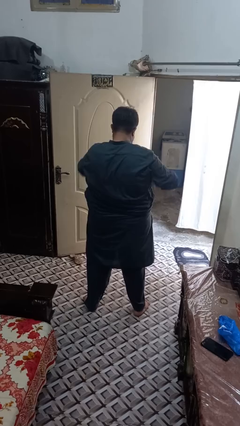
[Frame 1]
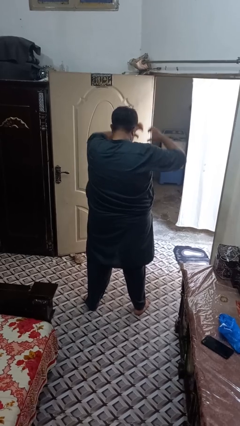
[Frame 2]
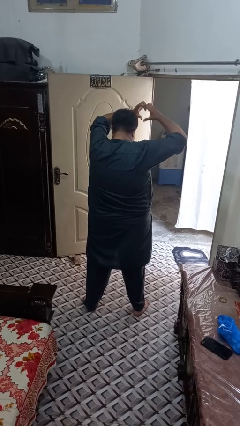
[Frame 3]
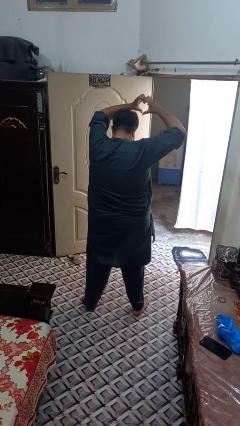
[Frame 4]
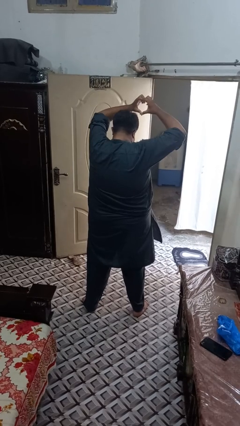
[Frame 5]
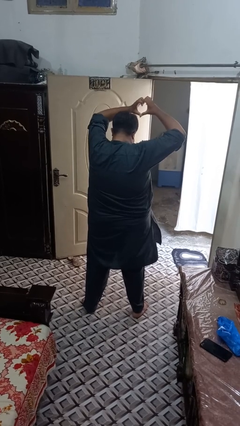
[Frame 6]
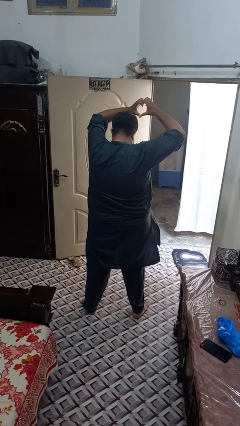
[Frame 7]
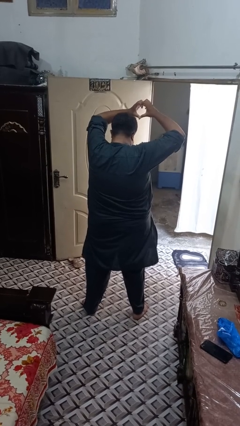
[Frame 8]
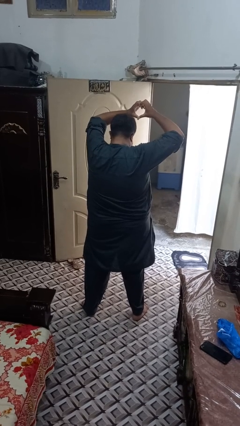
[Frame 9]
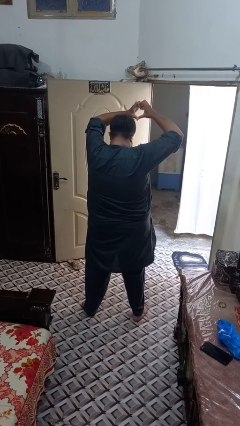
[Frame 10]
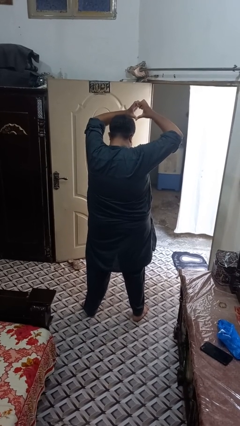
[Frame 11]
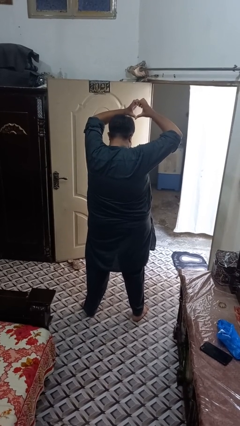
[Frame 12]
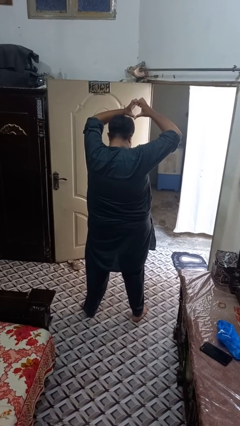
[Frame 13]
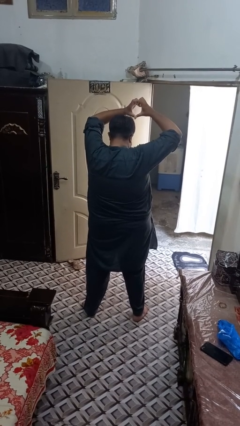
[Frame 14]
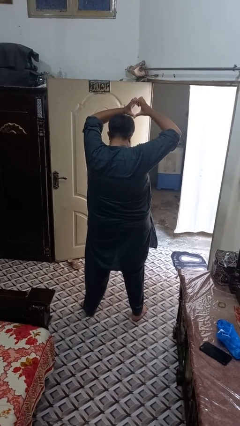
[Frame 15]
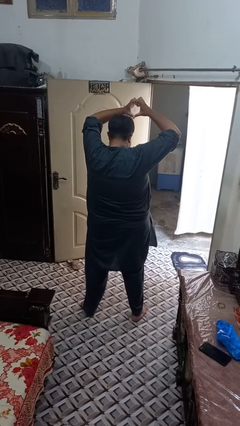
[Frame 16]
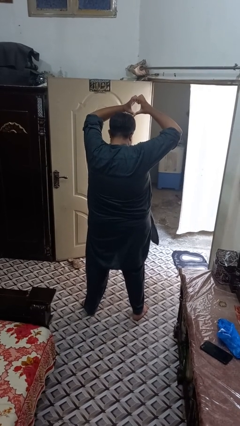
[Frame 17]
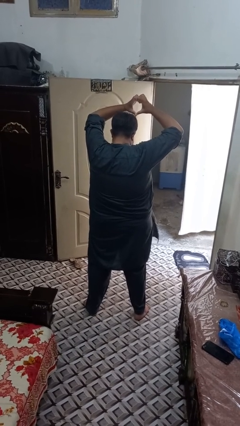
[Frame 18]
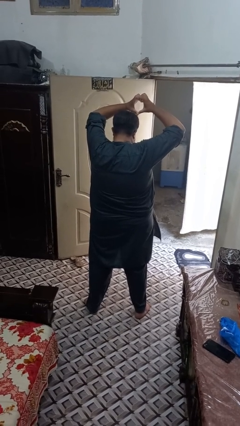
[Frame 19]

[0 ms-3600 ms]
person gestures heart

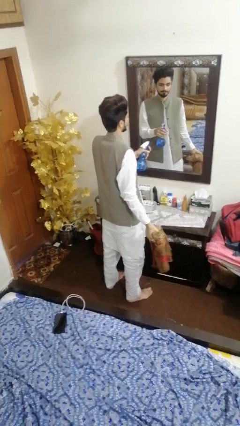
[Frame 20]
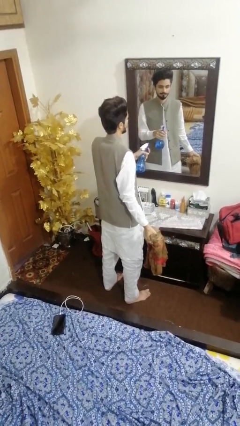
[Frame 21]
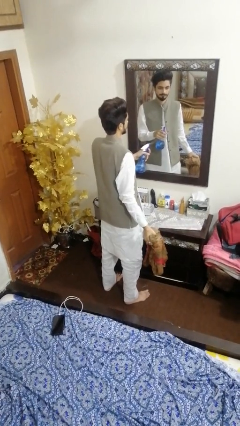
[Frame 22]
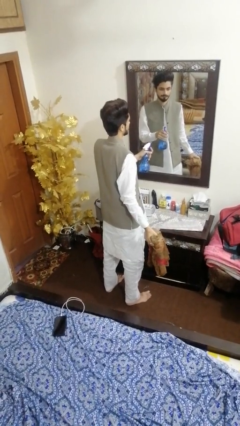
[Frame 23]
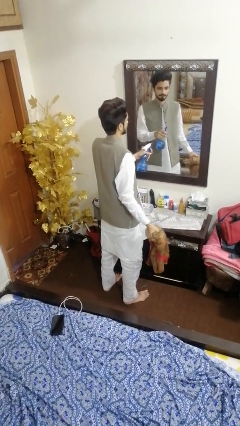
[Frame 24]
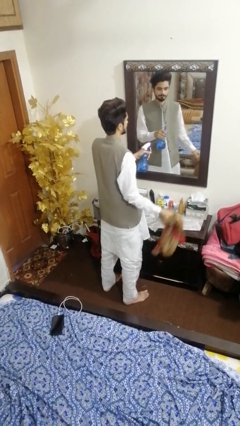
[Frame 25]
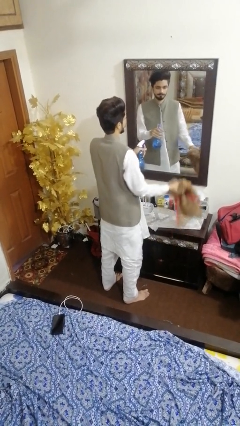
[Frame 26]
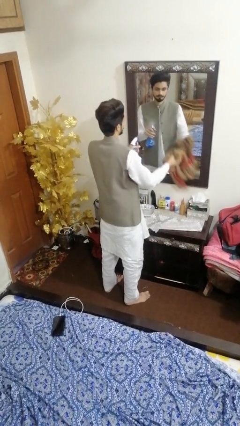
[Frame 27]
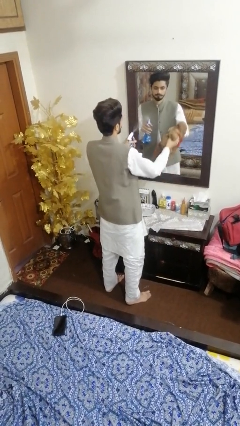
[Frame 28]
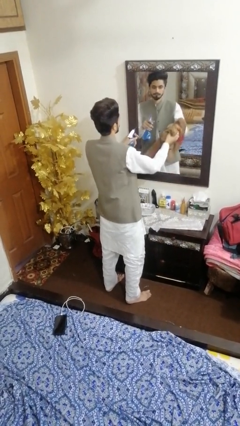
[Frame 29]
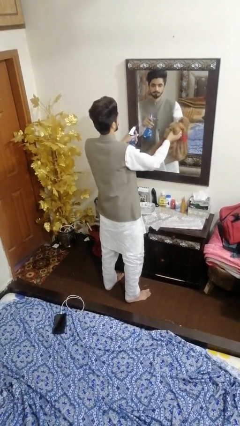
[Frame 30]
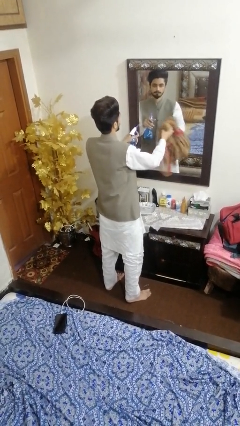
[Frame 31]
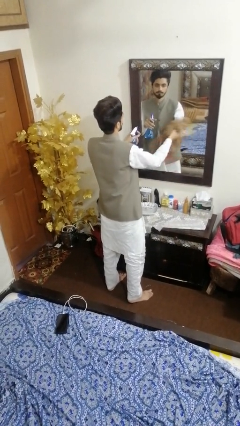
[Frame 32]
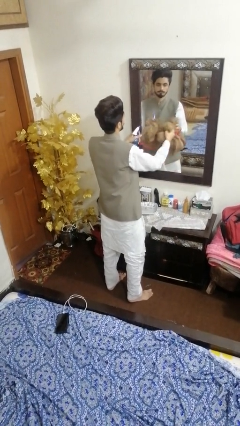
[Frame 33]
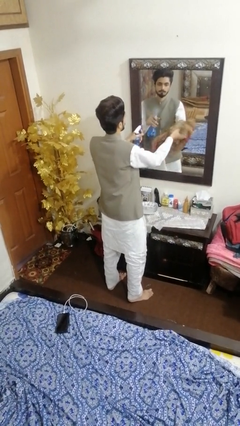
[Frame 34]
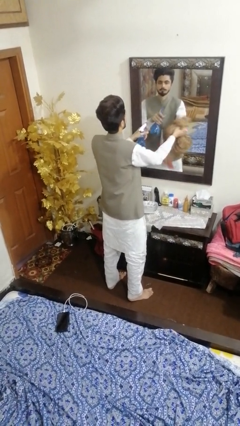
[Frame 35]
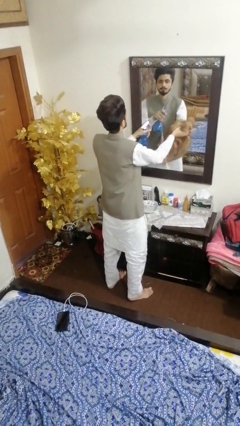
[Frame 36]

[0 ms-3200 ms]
person sprays from bottle

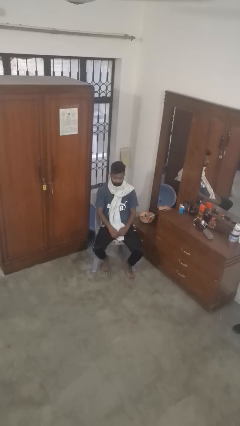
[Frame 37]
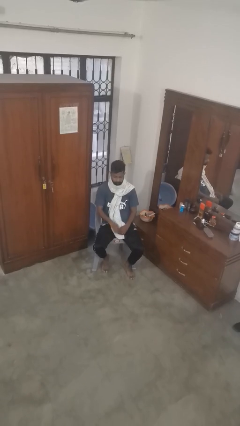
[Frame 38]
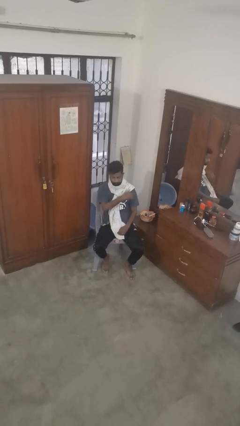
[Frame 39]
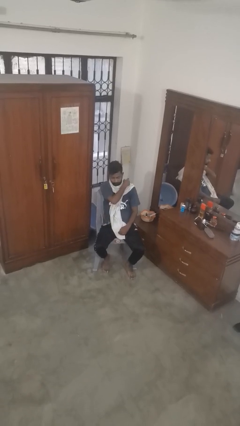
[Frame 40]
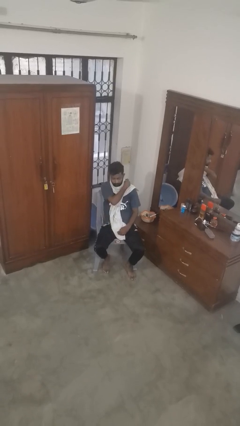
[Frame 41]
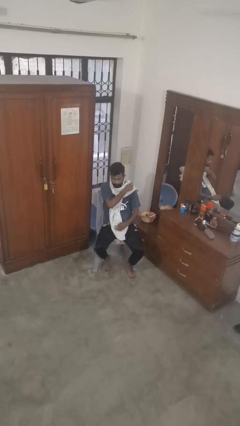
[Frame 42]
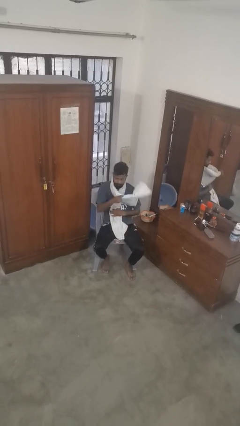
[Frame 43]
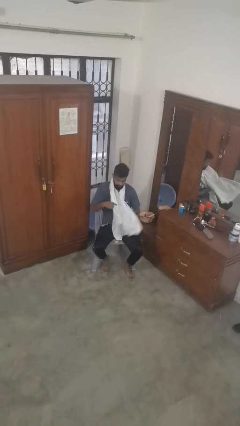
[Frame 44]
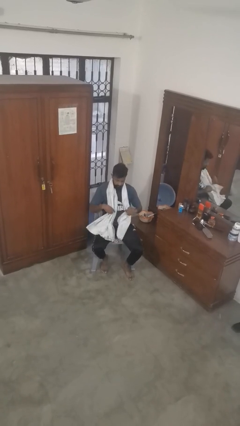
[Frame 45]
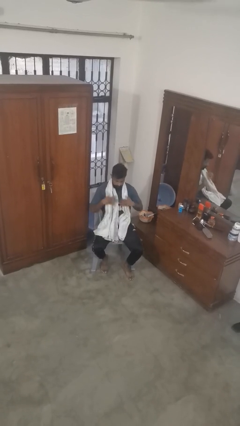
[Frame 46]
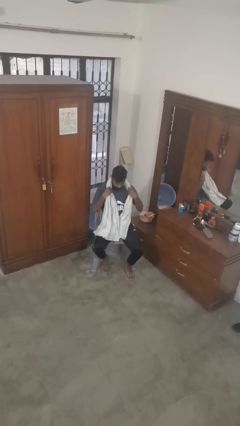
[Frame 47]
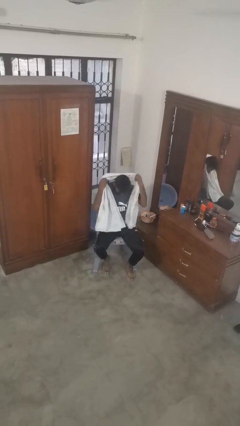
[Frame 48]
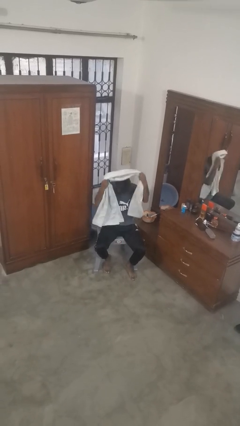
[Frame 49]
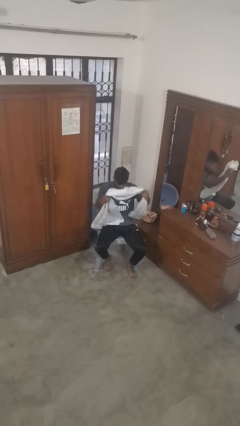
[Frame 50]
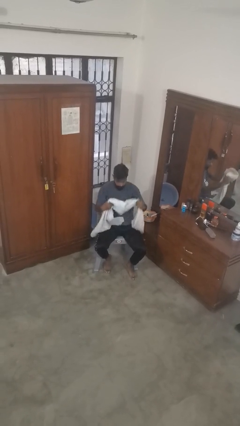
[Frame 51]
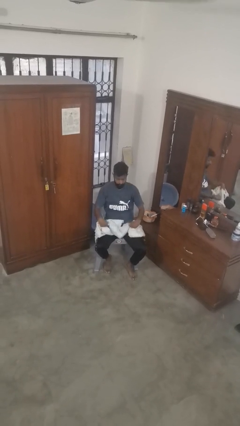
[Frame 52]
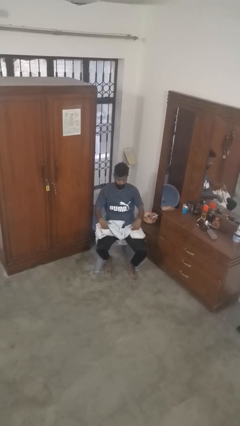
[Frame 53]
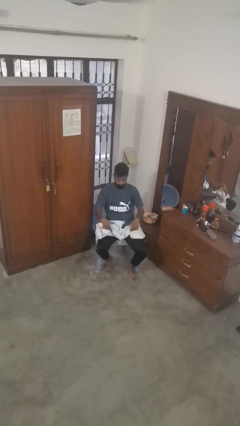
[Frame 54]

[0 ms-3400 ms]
person takes off scarf

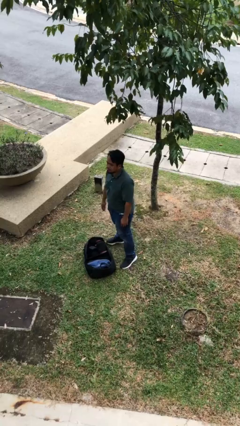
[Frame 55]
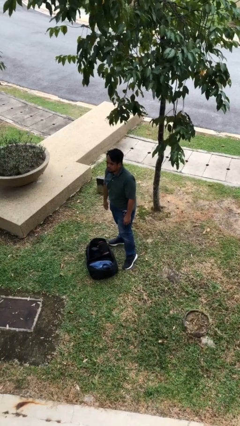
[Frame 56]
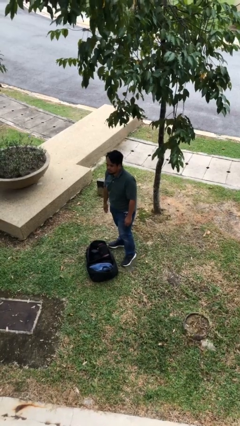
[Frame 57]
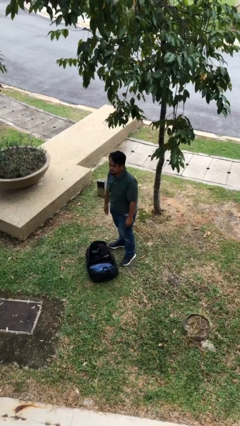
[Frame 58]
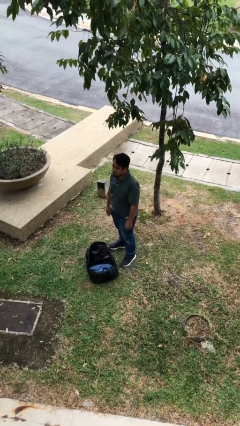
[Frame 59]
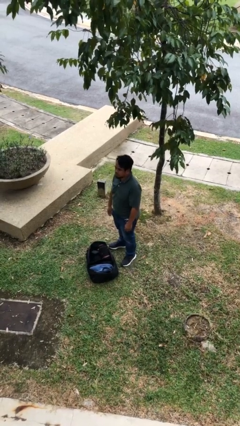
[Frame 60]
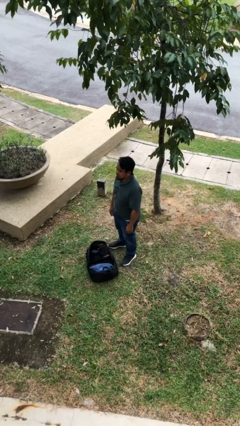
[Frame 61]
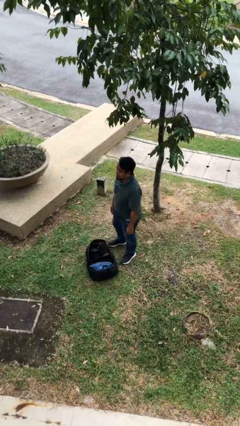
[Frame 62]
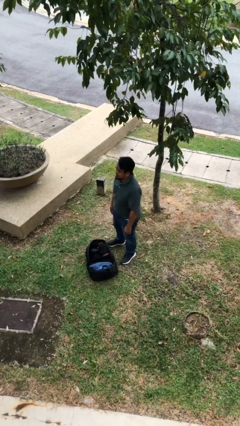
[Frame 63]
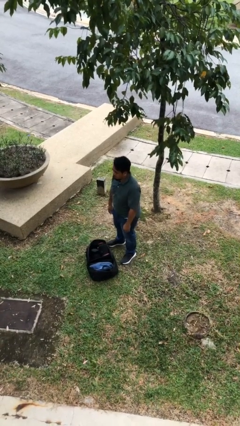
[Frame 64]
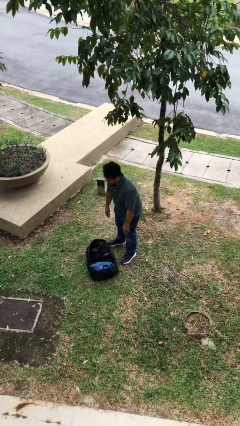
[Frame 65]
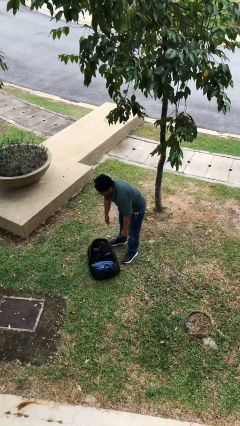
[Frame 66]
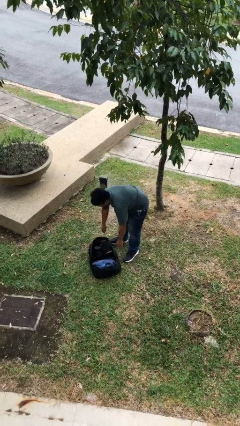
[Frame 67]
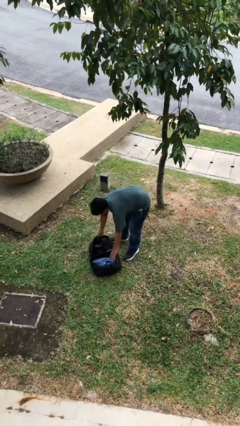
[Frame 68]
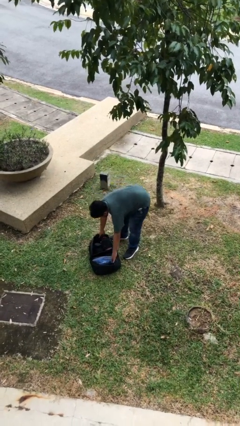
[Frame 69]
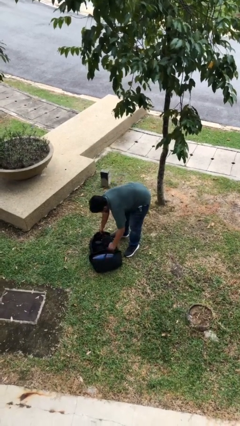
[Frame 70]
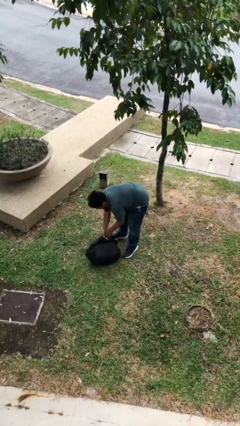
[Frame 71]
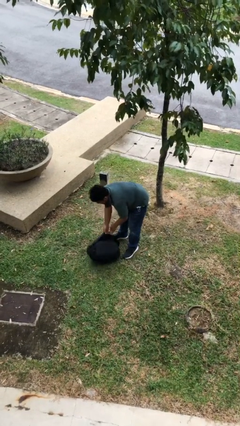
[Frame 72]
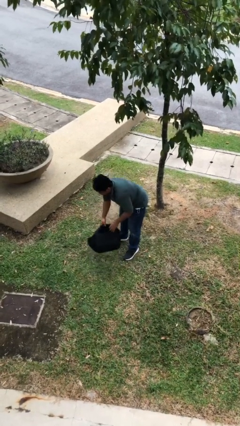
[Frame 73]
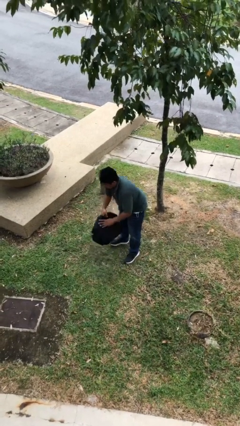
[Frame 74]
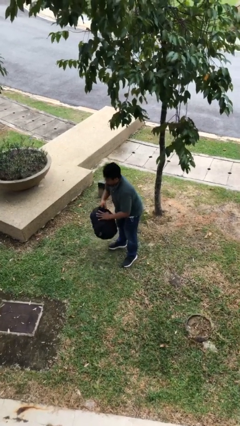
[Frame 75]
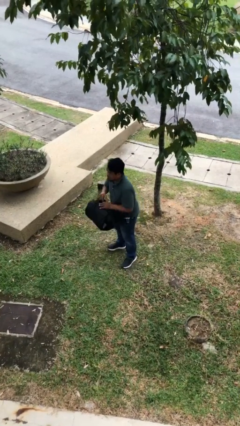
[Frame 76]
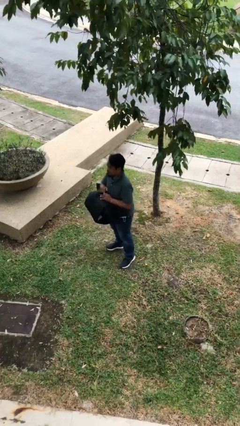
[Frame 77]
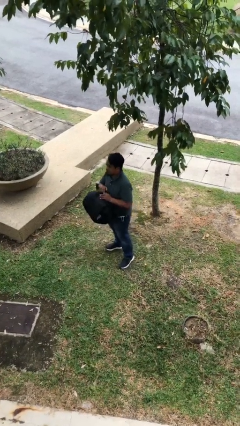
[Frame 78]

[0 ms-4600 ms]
person picks up object from floor

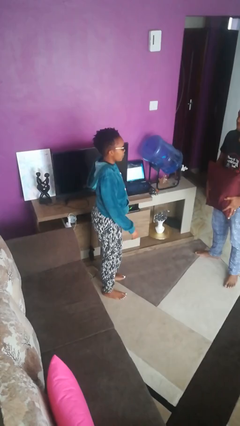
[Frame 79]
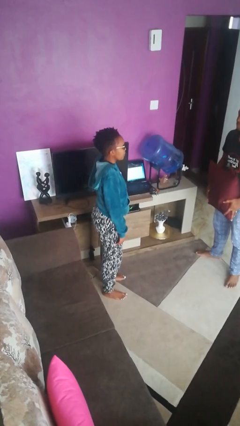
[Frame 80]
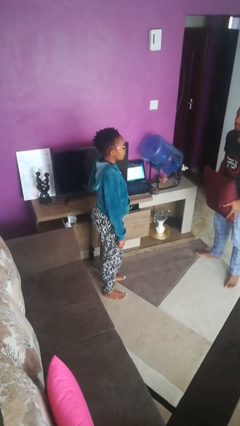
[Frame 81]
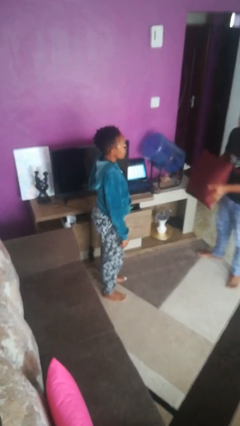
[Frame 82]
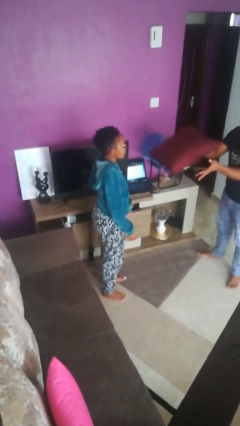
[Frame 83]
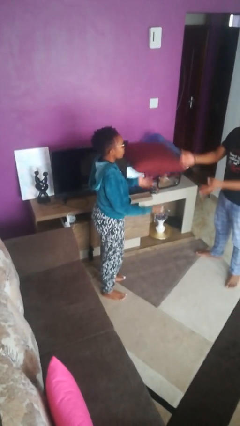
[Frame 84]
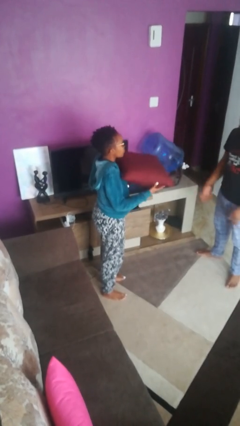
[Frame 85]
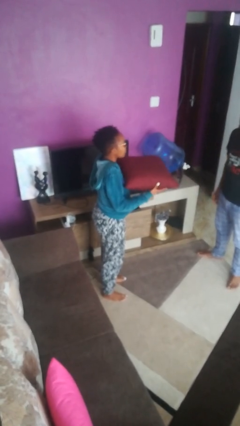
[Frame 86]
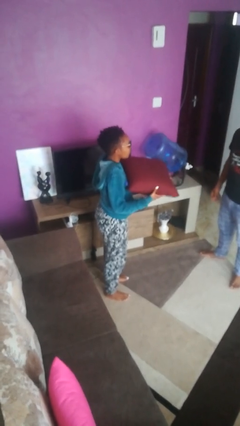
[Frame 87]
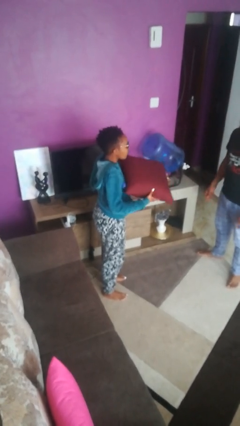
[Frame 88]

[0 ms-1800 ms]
person catches object from person

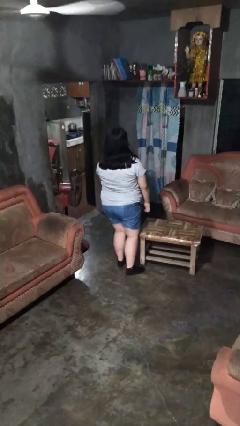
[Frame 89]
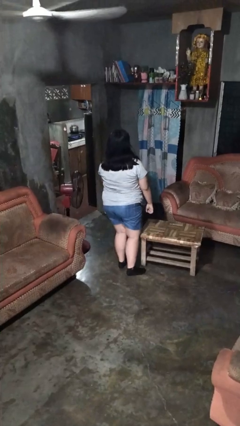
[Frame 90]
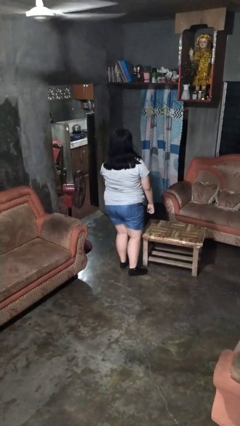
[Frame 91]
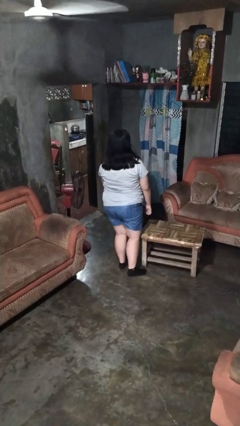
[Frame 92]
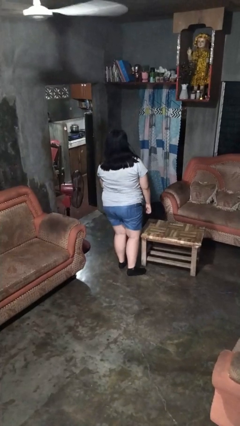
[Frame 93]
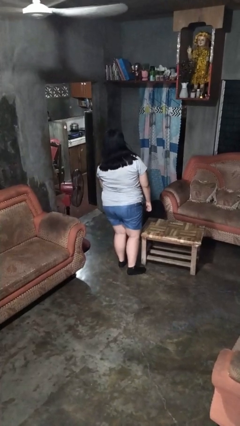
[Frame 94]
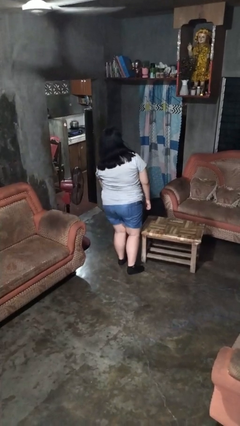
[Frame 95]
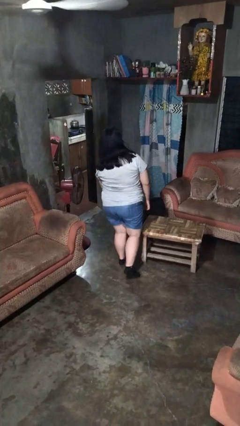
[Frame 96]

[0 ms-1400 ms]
person bumps into table
